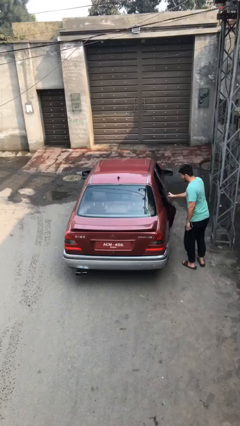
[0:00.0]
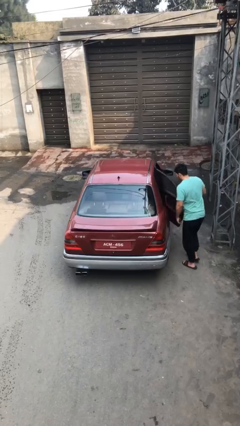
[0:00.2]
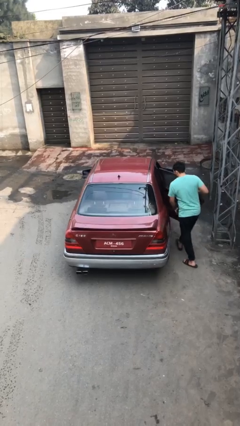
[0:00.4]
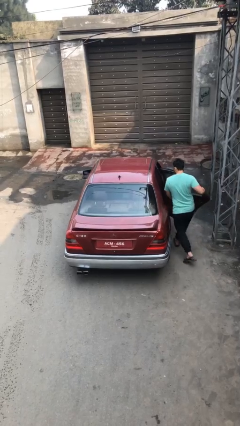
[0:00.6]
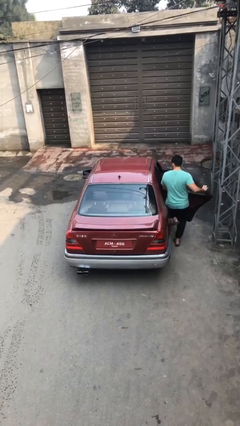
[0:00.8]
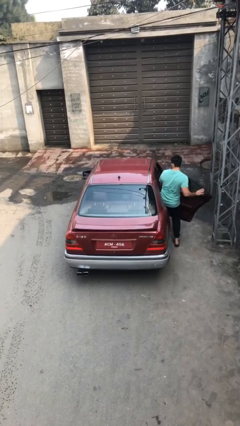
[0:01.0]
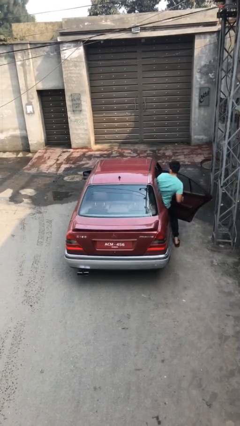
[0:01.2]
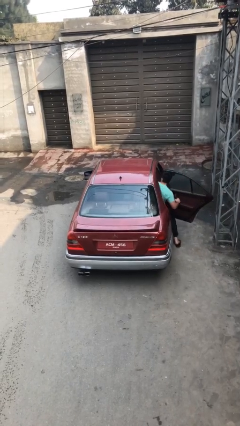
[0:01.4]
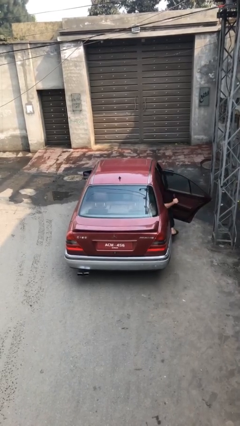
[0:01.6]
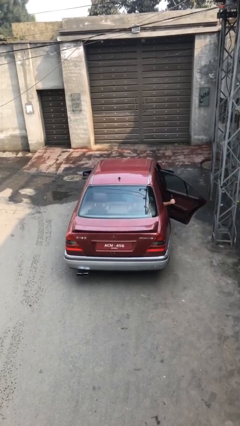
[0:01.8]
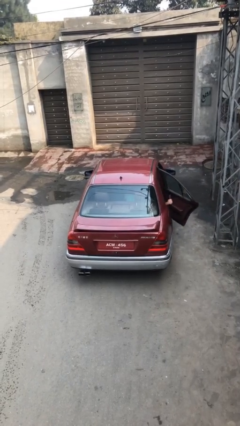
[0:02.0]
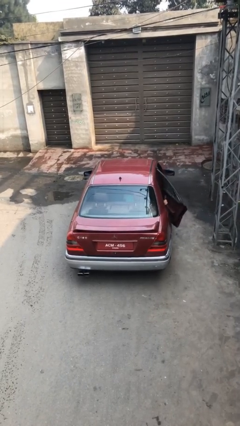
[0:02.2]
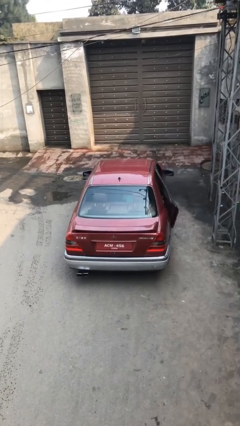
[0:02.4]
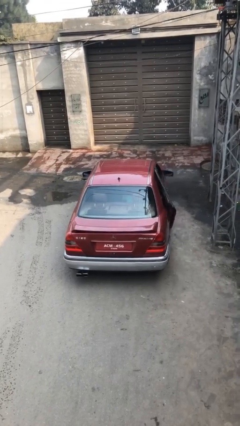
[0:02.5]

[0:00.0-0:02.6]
car picks up person

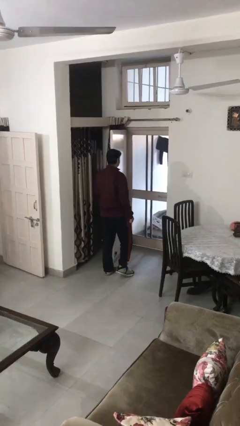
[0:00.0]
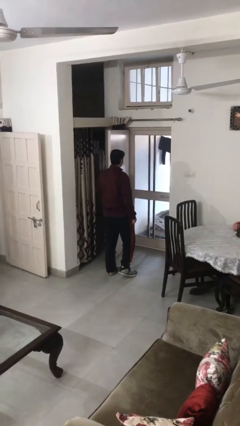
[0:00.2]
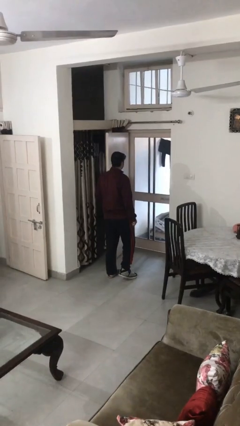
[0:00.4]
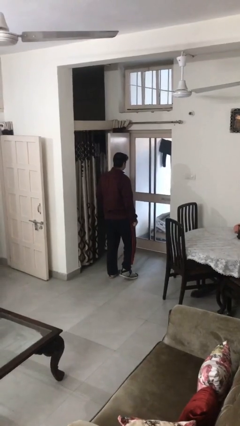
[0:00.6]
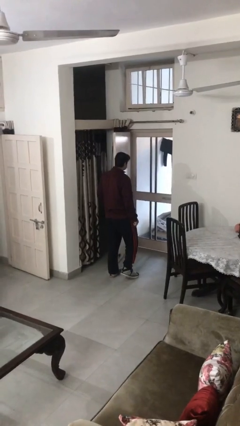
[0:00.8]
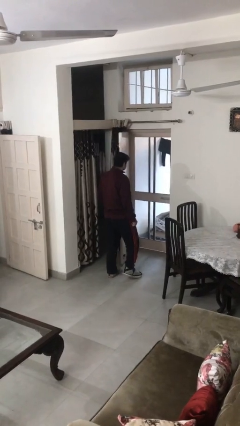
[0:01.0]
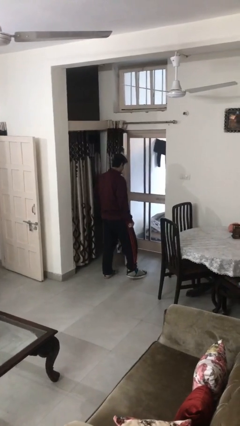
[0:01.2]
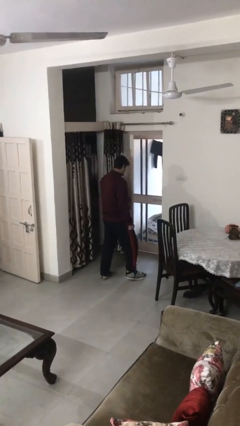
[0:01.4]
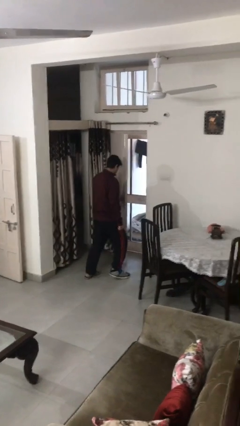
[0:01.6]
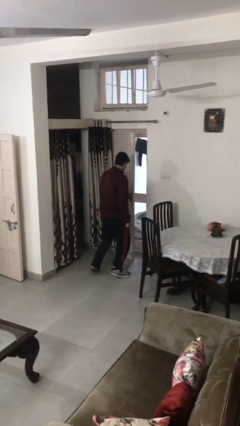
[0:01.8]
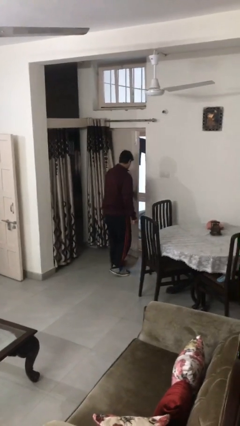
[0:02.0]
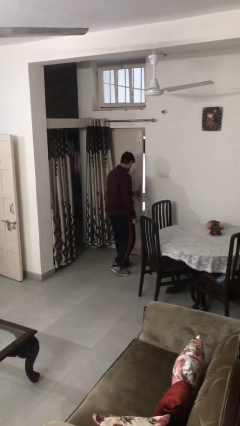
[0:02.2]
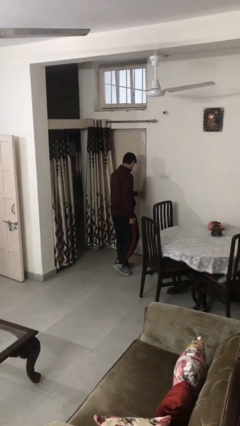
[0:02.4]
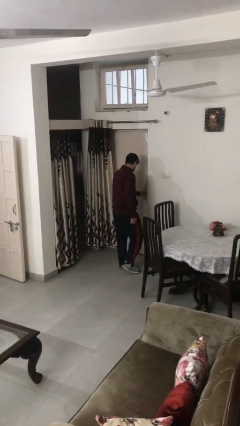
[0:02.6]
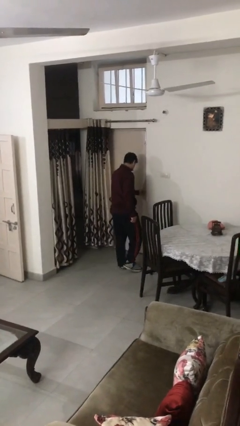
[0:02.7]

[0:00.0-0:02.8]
person closes facility door

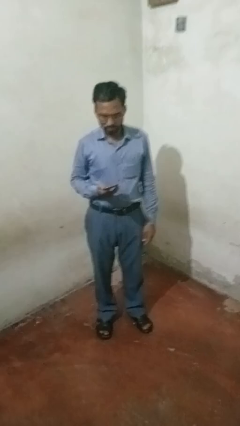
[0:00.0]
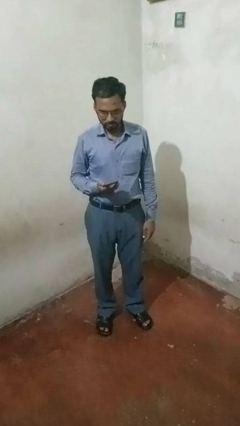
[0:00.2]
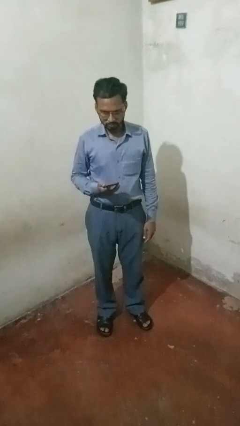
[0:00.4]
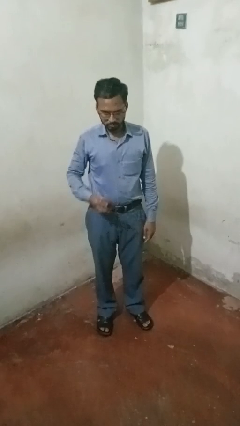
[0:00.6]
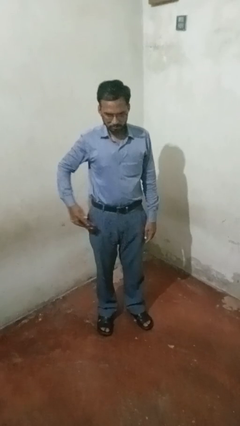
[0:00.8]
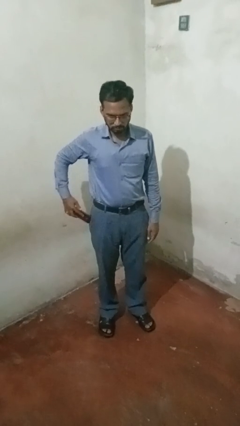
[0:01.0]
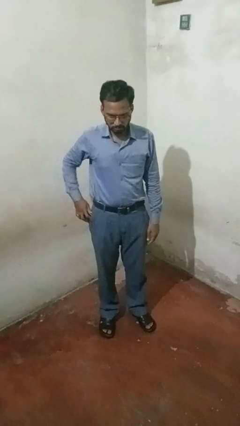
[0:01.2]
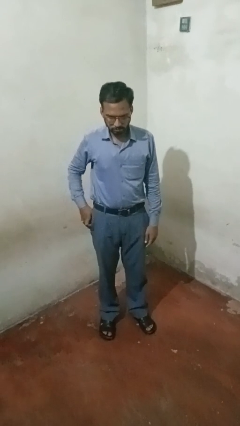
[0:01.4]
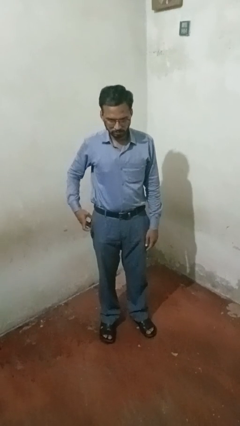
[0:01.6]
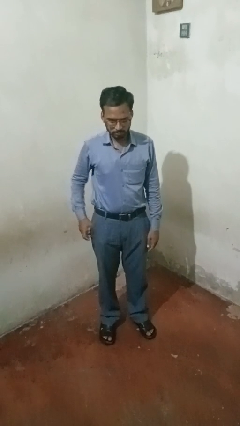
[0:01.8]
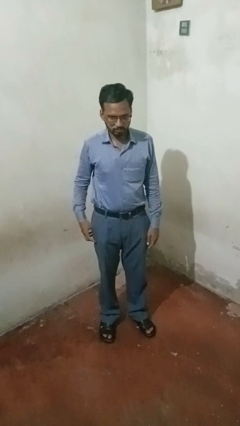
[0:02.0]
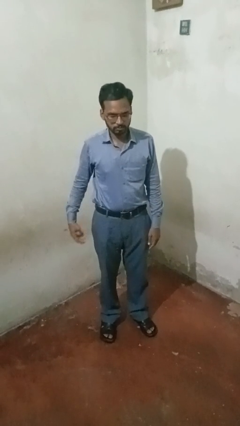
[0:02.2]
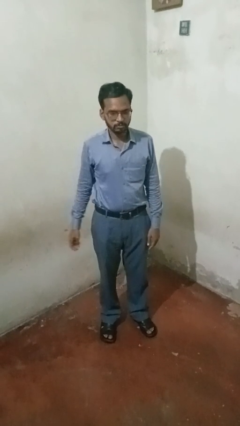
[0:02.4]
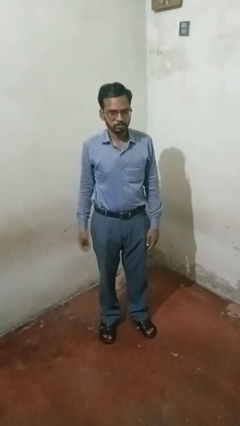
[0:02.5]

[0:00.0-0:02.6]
person puts phone into pocket

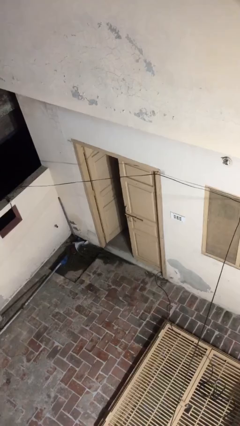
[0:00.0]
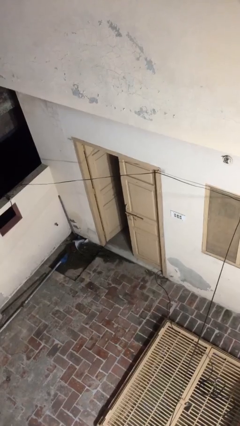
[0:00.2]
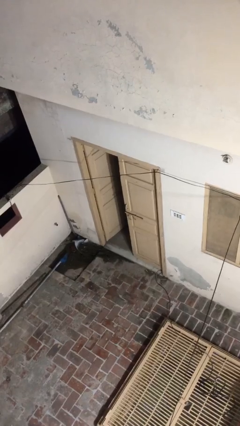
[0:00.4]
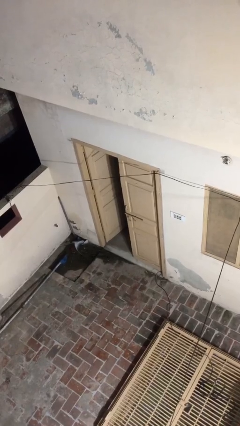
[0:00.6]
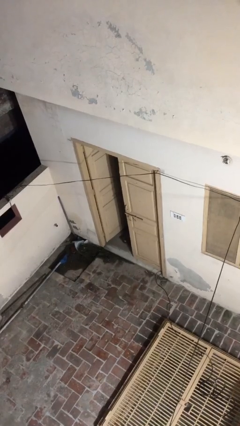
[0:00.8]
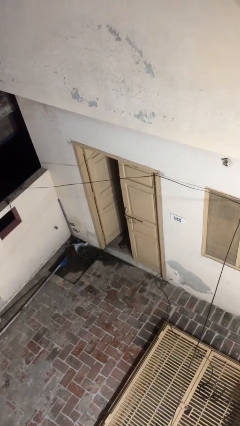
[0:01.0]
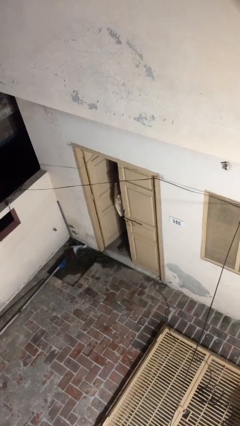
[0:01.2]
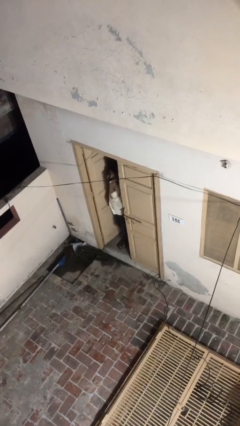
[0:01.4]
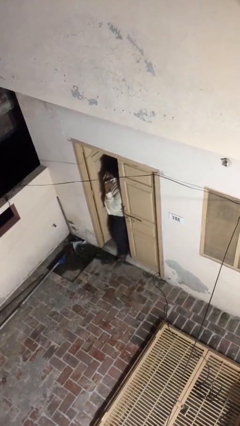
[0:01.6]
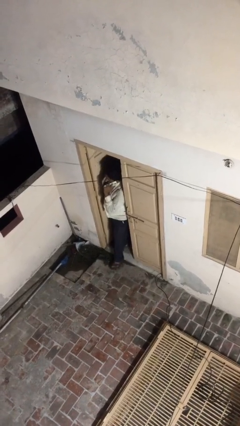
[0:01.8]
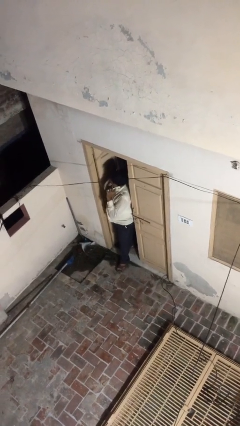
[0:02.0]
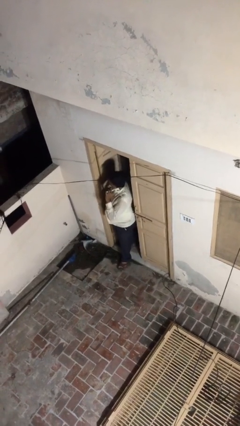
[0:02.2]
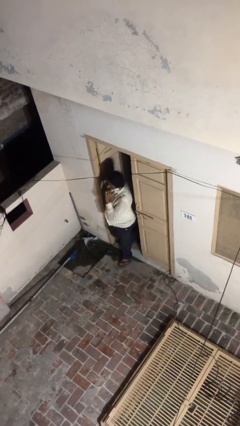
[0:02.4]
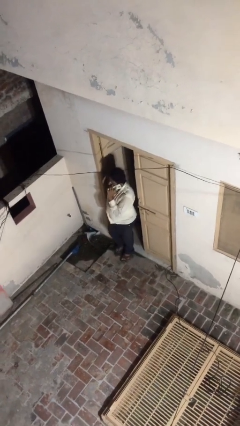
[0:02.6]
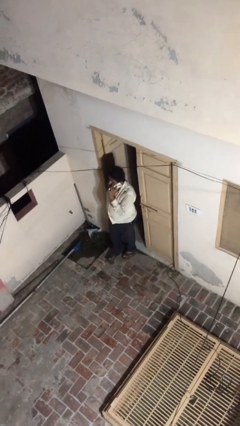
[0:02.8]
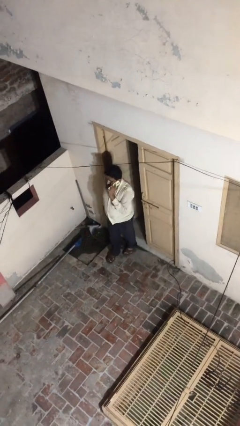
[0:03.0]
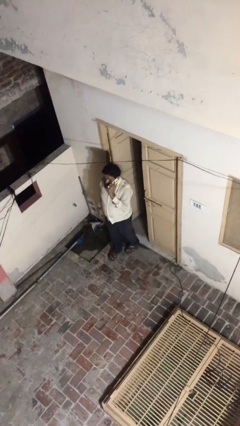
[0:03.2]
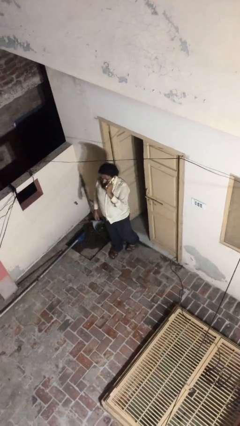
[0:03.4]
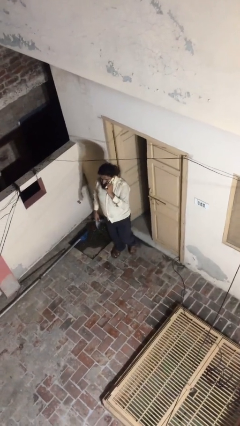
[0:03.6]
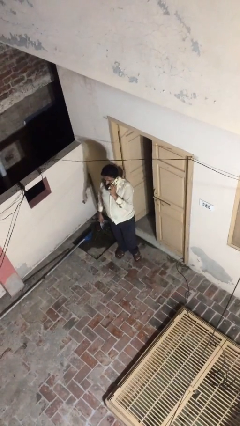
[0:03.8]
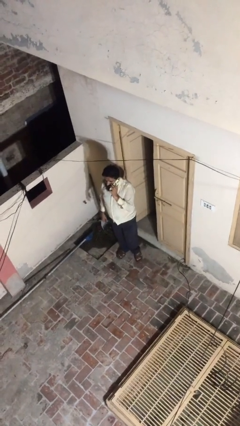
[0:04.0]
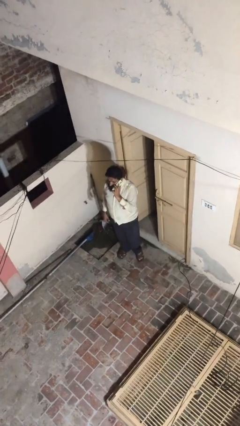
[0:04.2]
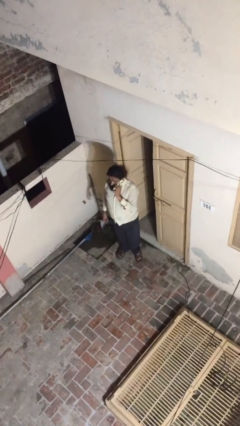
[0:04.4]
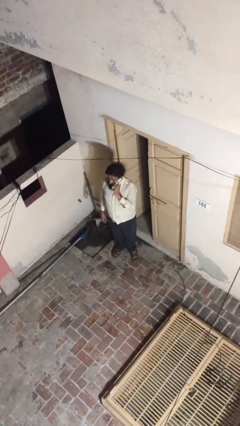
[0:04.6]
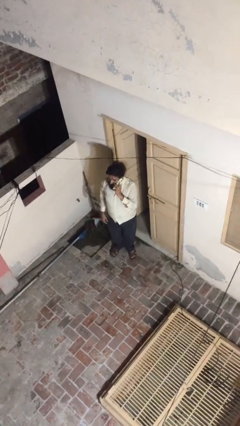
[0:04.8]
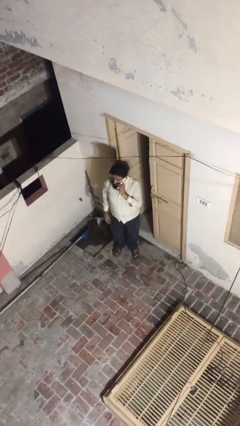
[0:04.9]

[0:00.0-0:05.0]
person enters scene through structure

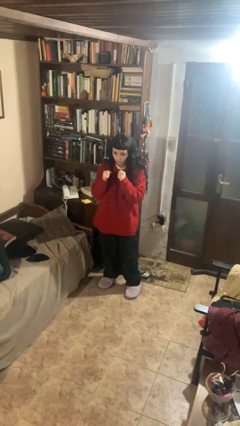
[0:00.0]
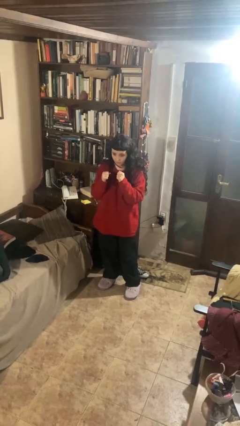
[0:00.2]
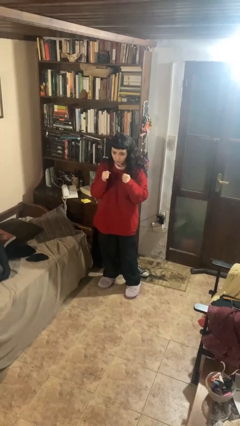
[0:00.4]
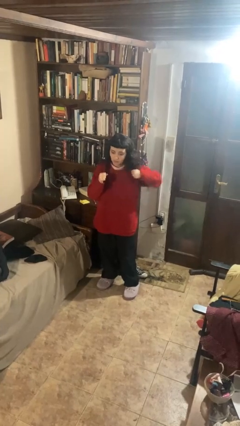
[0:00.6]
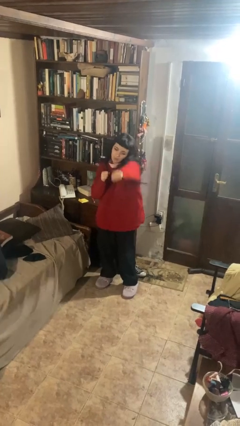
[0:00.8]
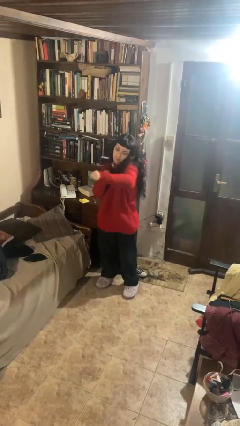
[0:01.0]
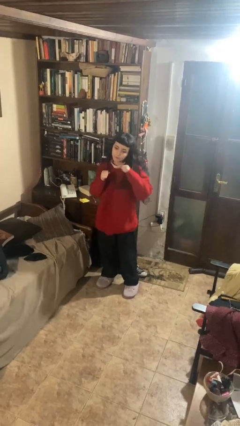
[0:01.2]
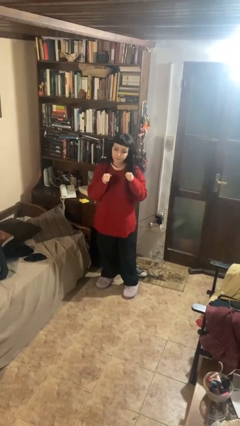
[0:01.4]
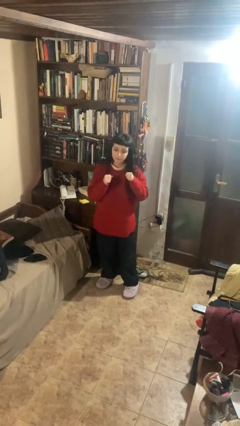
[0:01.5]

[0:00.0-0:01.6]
person punches

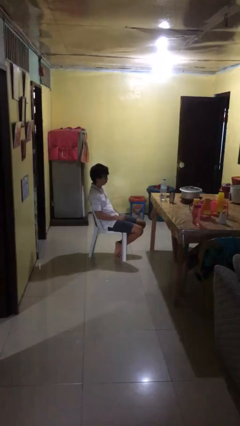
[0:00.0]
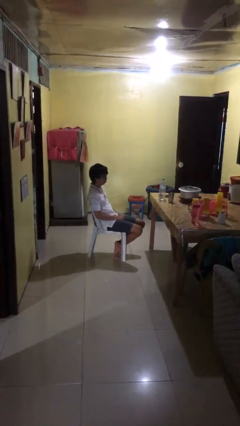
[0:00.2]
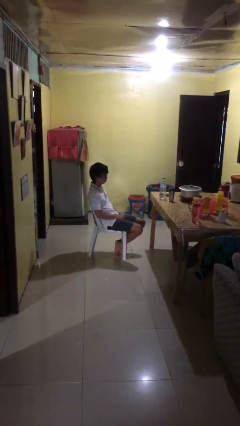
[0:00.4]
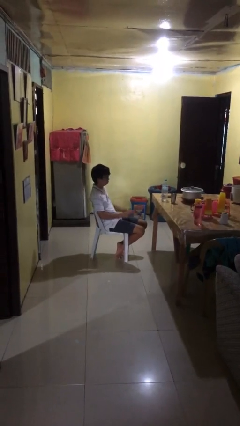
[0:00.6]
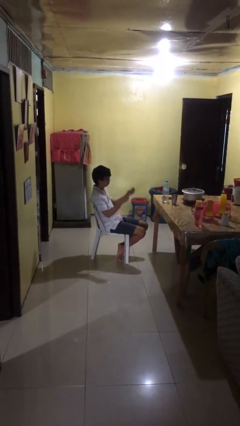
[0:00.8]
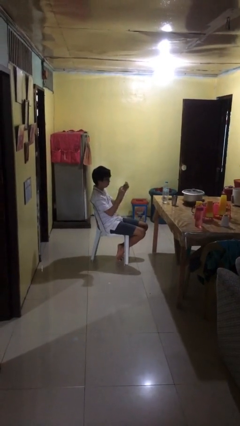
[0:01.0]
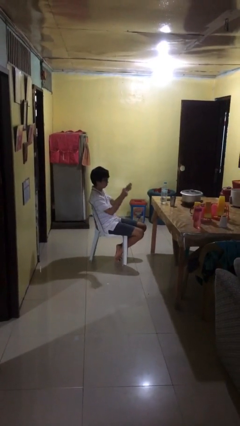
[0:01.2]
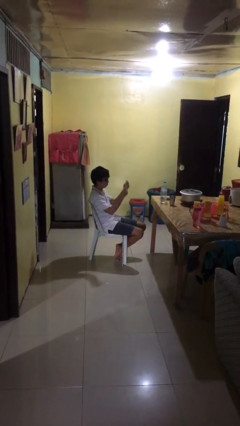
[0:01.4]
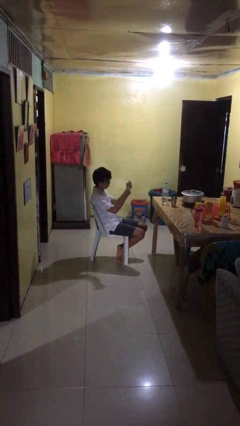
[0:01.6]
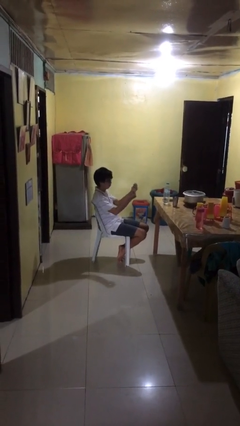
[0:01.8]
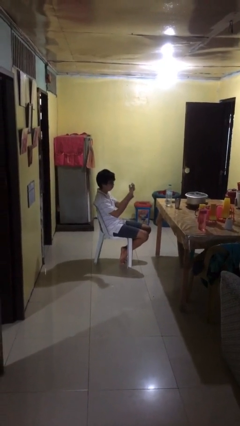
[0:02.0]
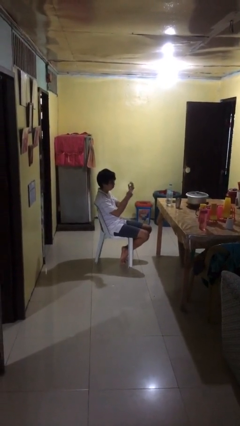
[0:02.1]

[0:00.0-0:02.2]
person snaps fingers

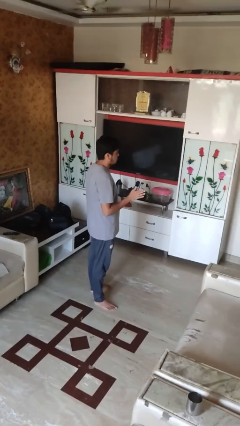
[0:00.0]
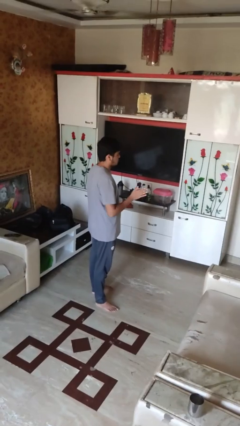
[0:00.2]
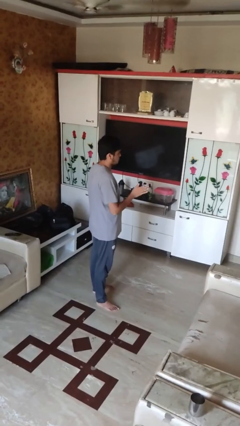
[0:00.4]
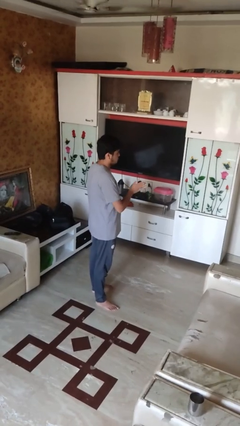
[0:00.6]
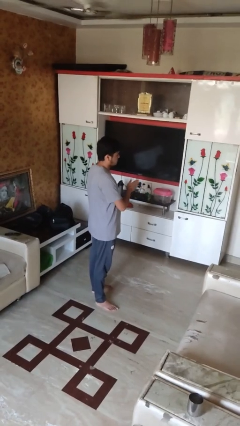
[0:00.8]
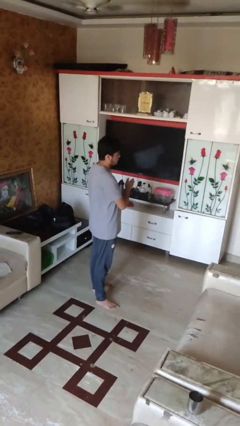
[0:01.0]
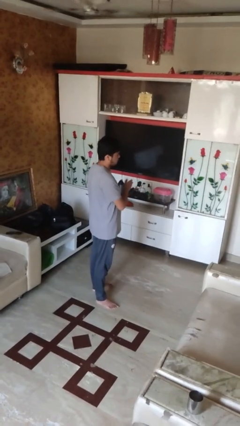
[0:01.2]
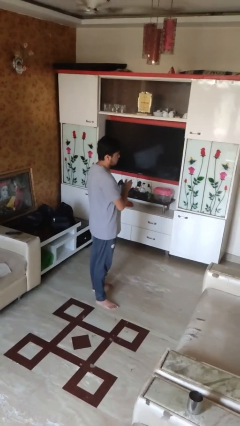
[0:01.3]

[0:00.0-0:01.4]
person gestures swipe right
